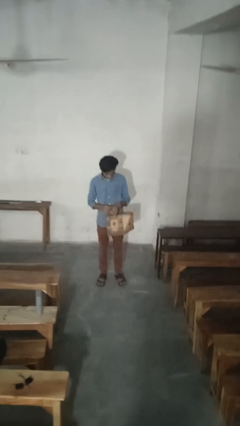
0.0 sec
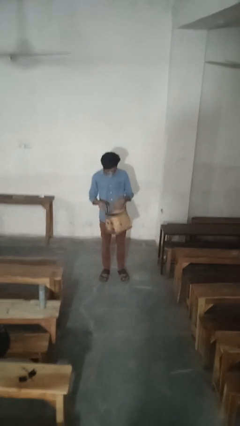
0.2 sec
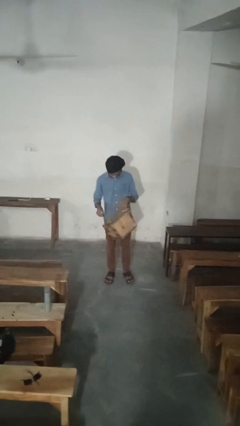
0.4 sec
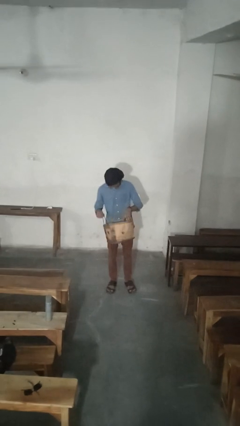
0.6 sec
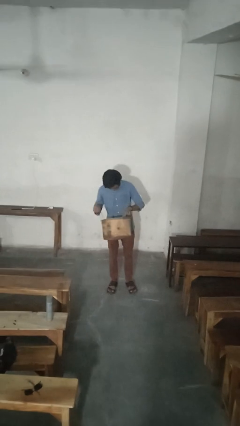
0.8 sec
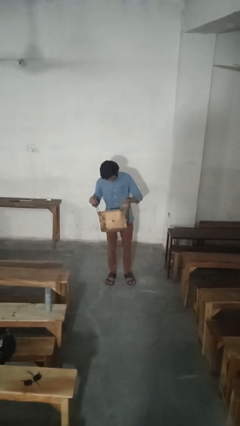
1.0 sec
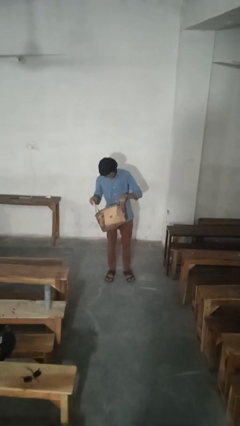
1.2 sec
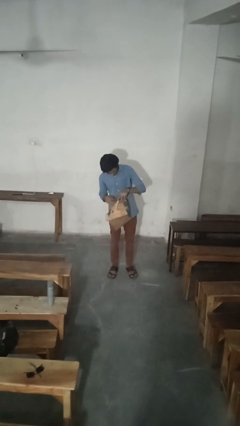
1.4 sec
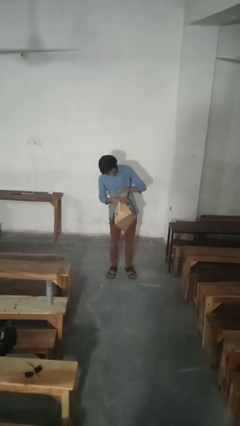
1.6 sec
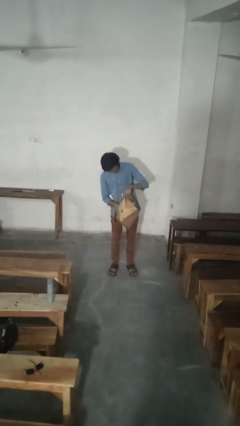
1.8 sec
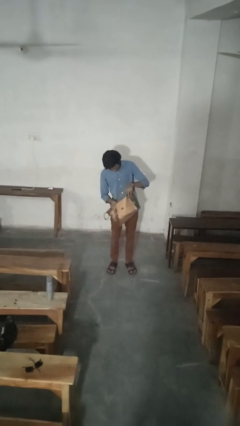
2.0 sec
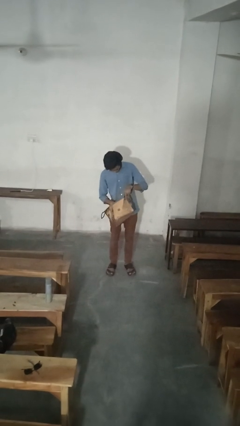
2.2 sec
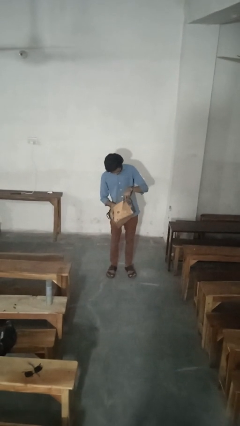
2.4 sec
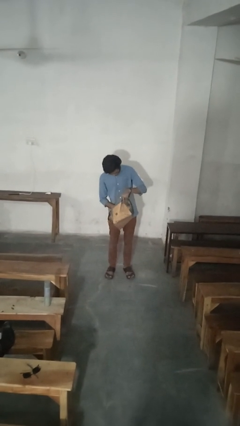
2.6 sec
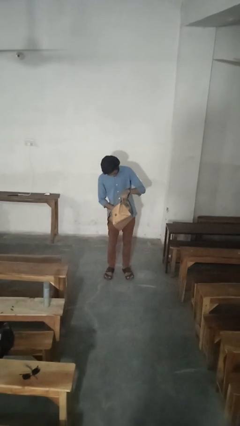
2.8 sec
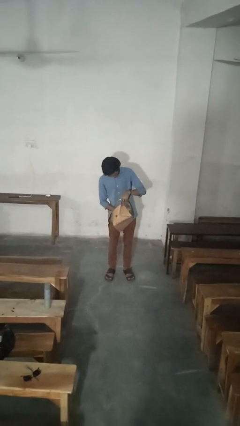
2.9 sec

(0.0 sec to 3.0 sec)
person searches in purse

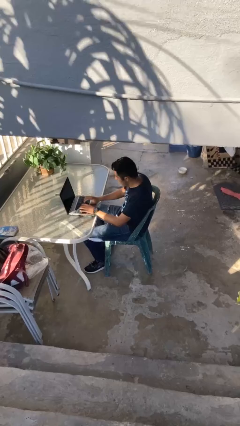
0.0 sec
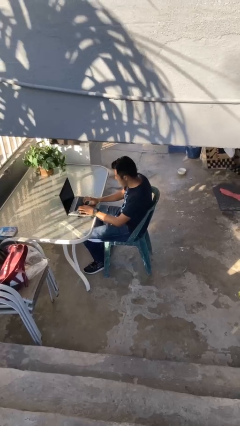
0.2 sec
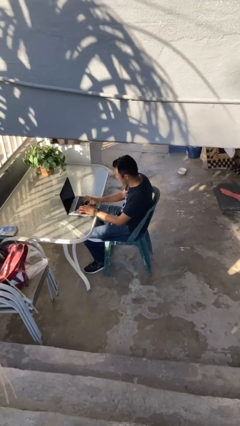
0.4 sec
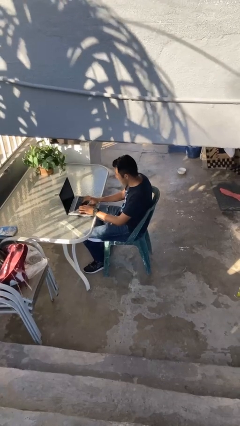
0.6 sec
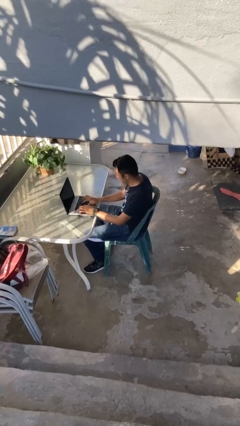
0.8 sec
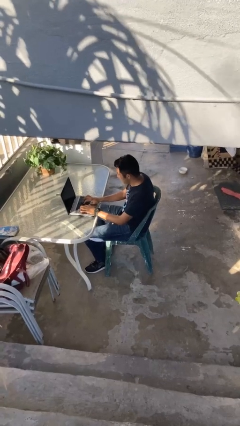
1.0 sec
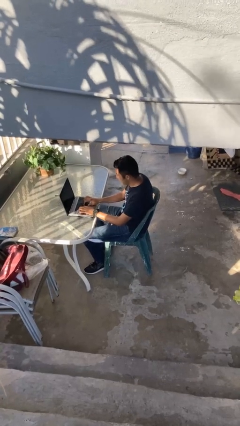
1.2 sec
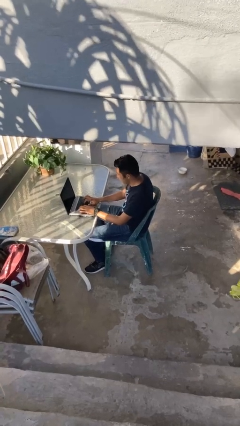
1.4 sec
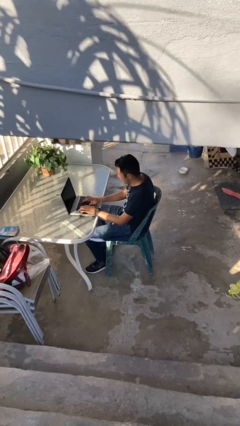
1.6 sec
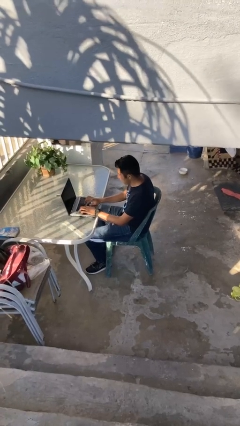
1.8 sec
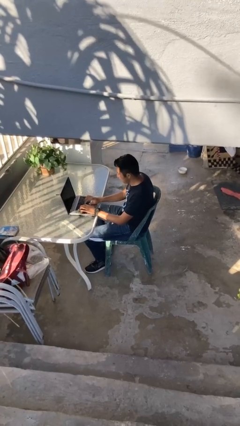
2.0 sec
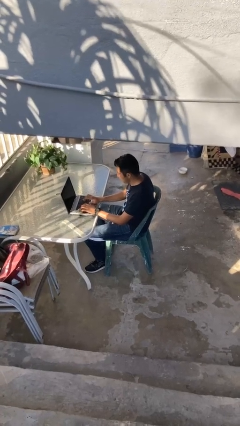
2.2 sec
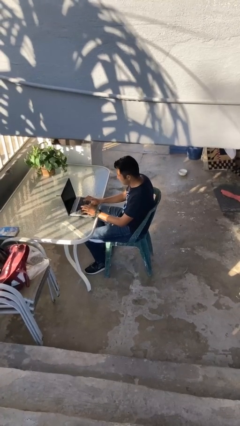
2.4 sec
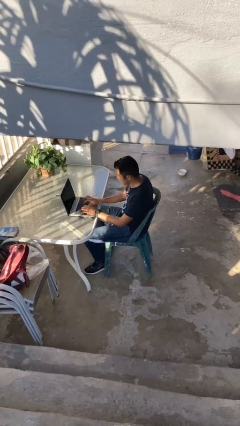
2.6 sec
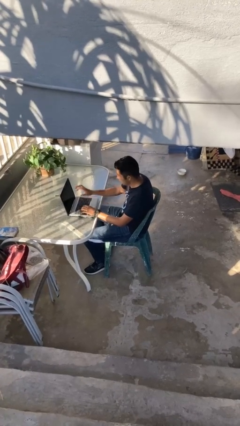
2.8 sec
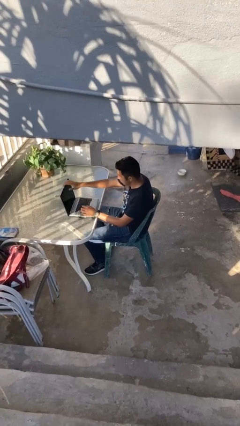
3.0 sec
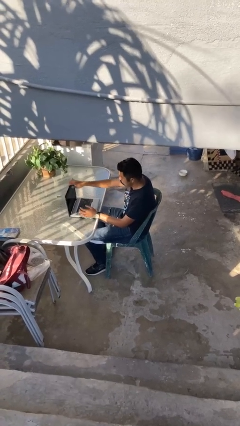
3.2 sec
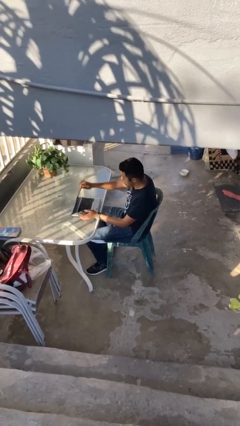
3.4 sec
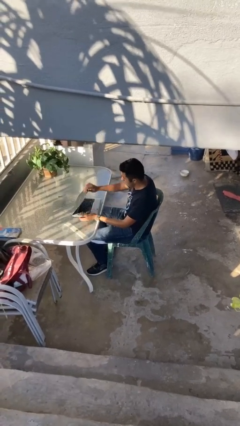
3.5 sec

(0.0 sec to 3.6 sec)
person interacts with laptop

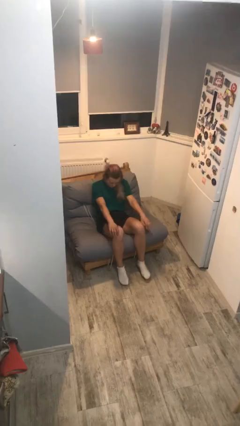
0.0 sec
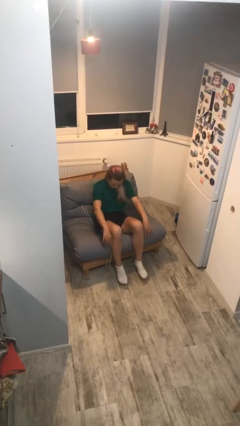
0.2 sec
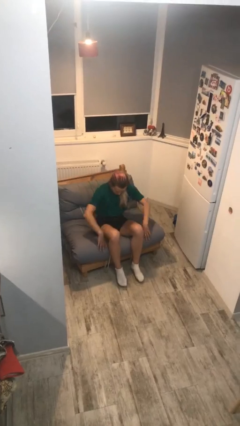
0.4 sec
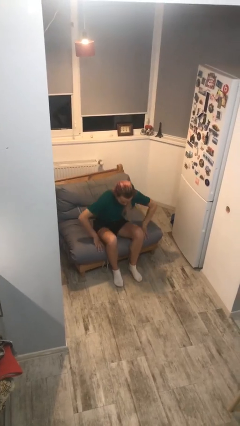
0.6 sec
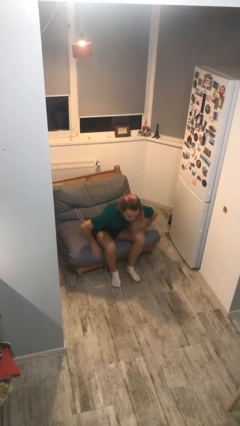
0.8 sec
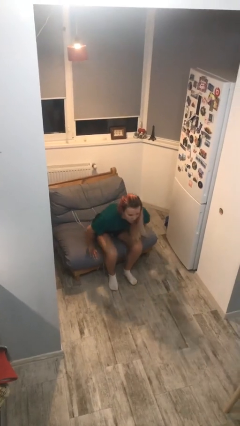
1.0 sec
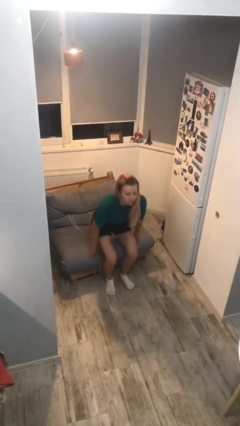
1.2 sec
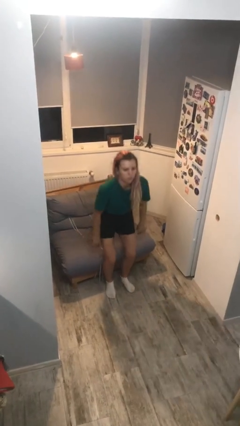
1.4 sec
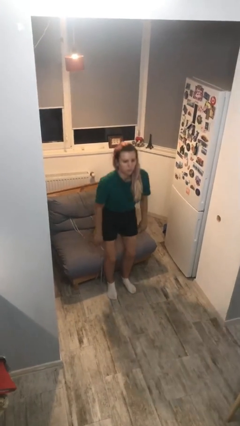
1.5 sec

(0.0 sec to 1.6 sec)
person stands up

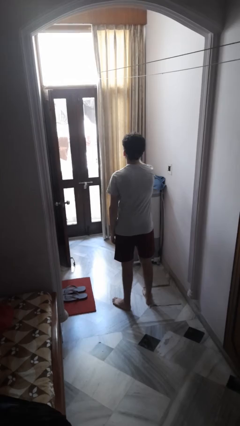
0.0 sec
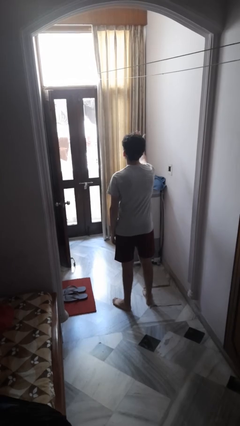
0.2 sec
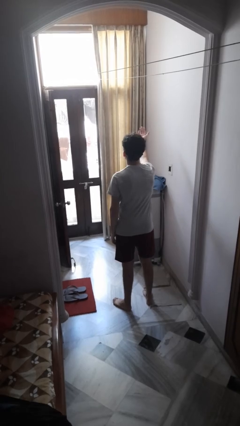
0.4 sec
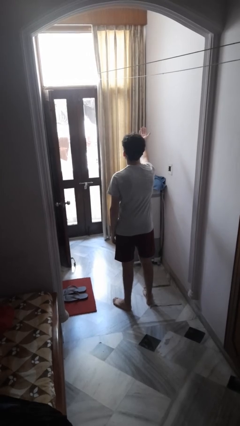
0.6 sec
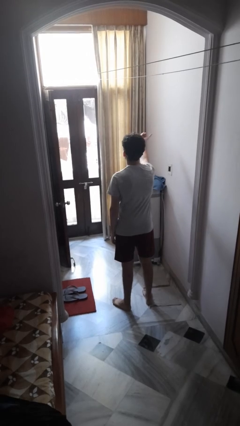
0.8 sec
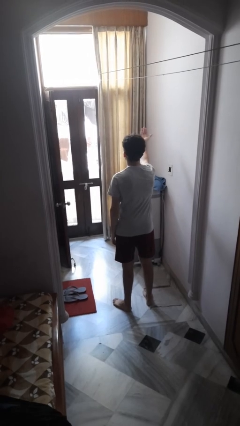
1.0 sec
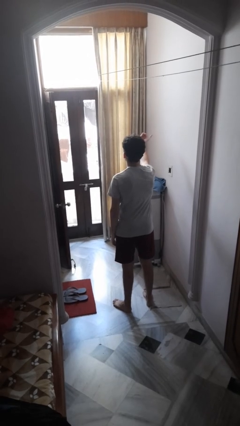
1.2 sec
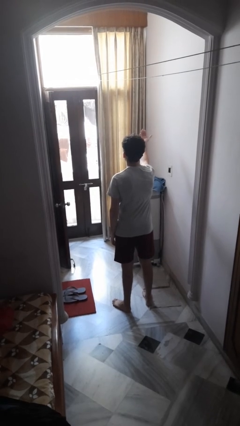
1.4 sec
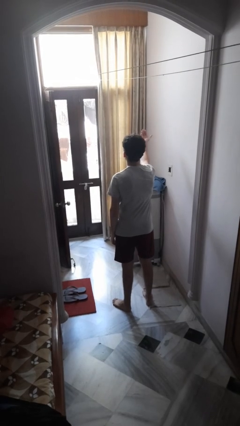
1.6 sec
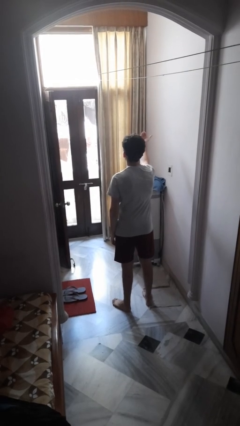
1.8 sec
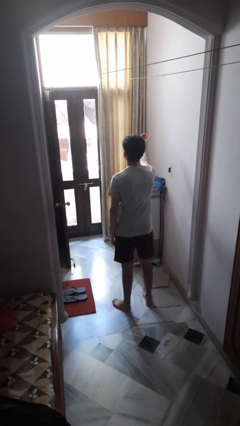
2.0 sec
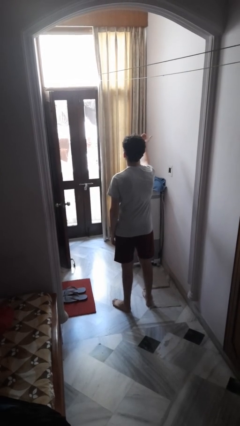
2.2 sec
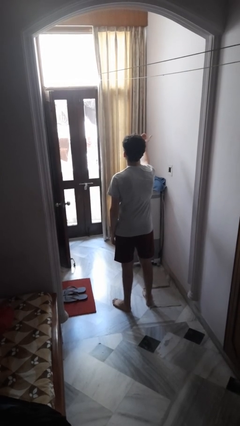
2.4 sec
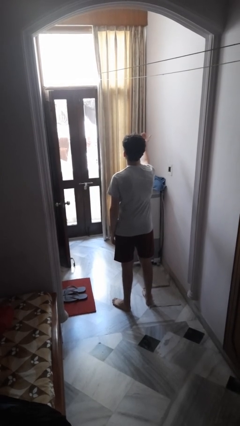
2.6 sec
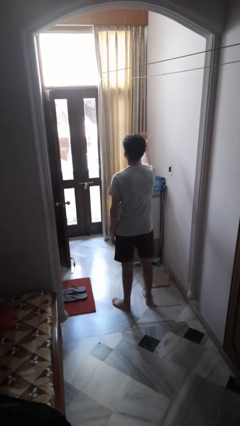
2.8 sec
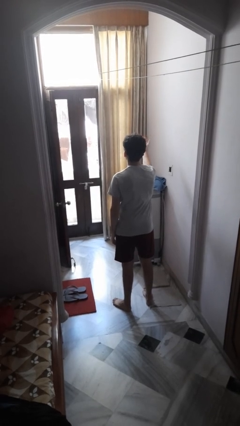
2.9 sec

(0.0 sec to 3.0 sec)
person gestures come here

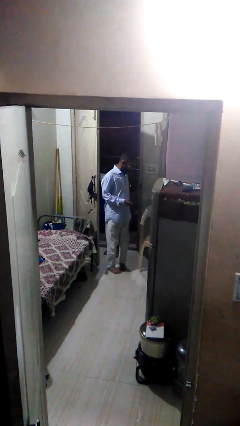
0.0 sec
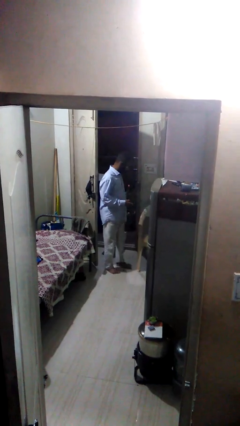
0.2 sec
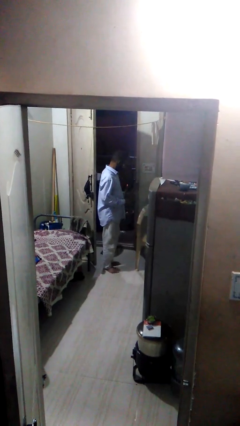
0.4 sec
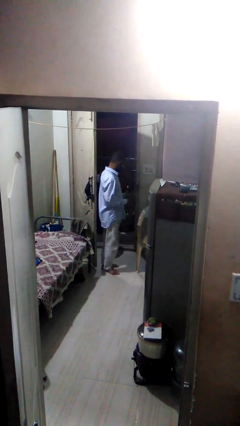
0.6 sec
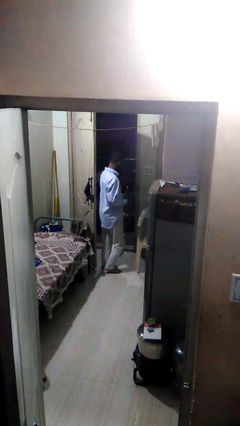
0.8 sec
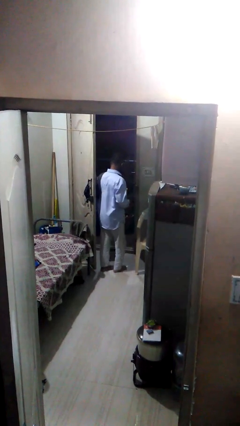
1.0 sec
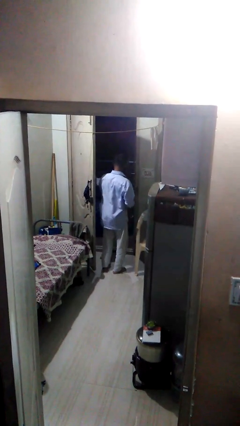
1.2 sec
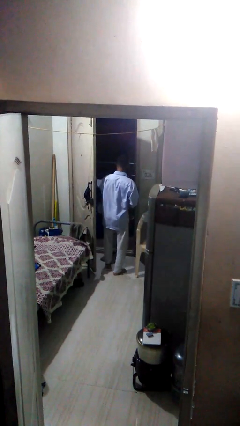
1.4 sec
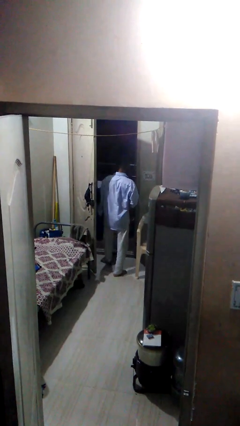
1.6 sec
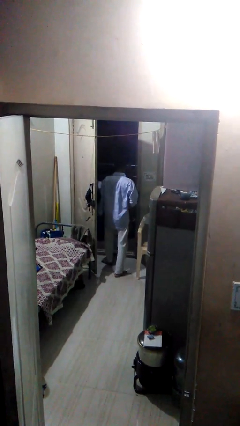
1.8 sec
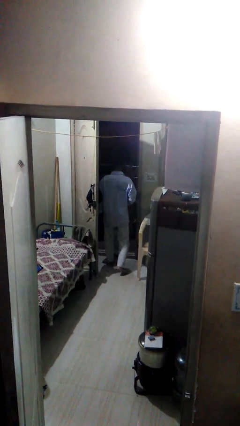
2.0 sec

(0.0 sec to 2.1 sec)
person exits scene through structure

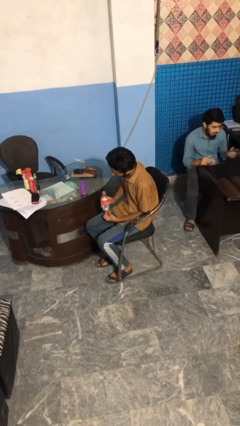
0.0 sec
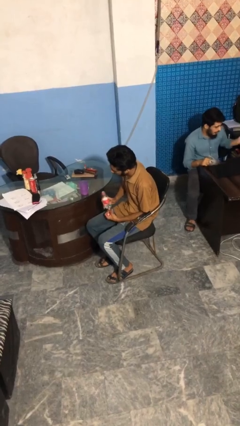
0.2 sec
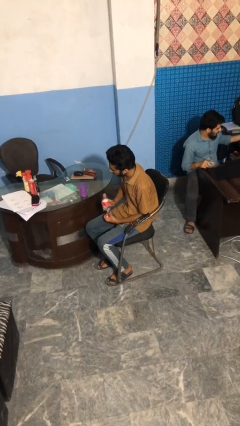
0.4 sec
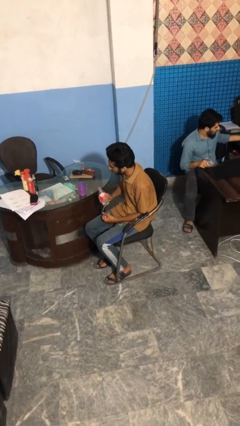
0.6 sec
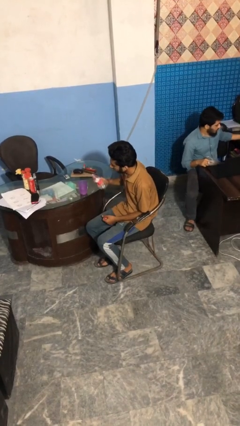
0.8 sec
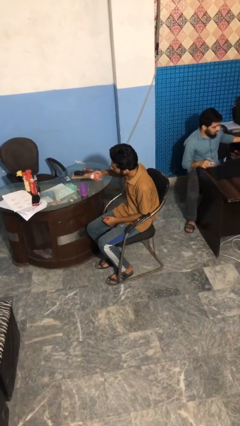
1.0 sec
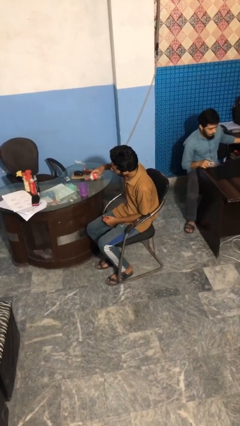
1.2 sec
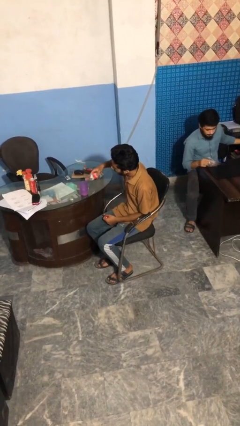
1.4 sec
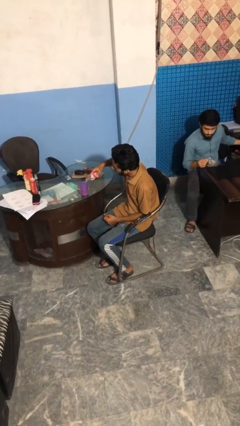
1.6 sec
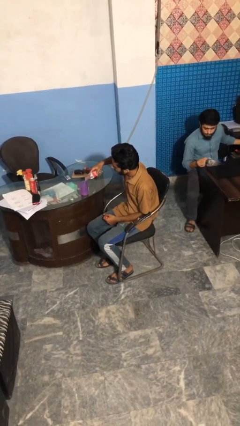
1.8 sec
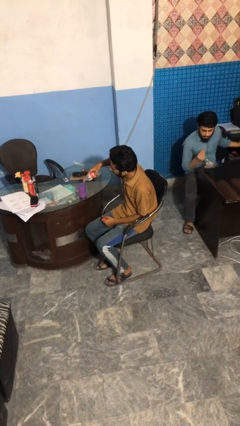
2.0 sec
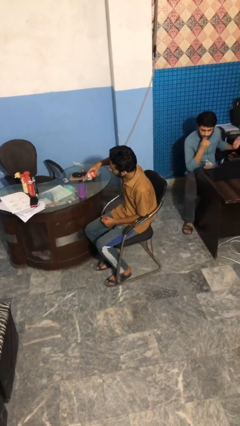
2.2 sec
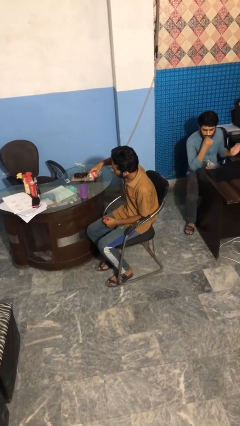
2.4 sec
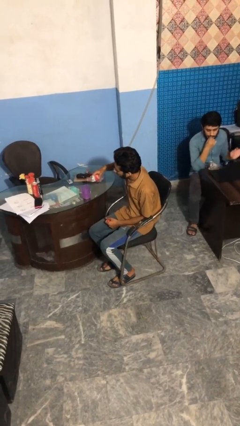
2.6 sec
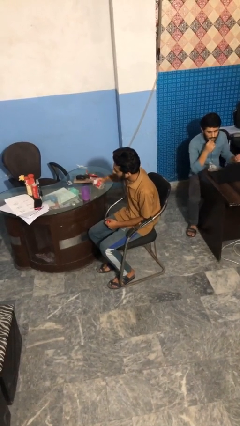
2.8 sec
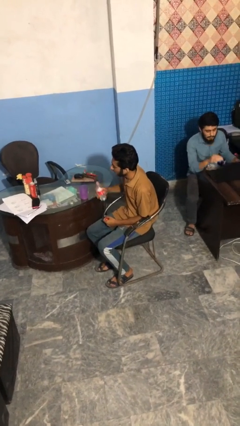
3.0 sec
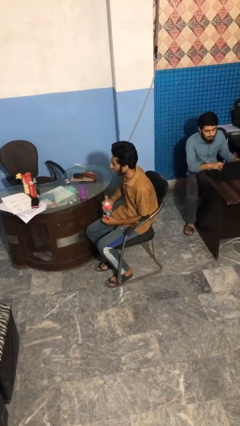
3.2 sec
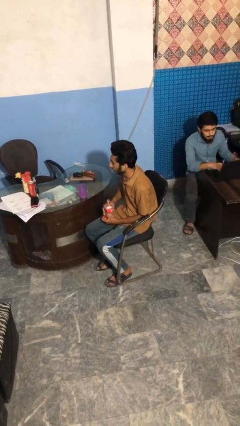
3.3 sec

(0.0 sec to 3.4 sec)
person pours liquid into cup

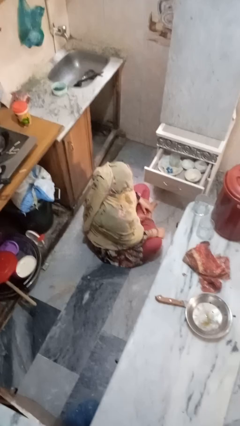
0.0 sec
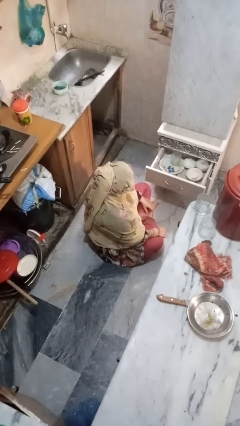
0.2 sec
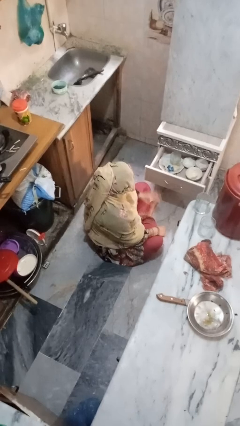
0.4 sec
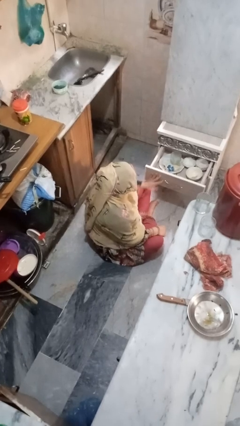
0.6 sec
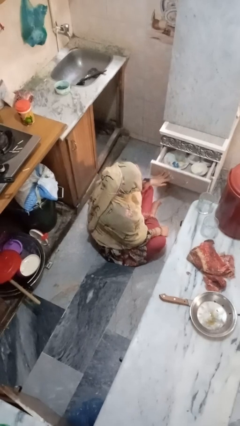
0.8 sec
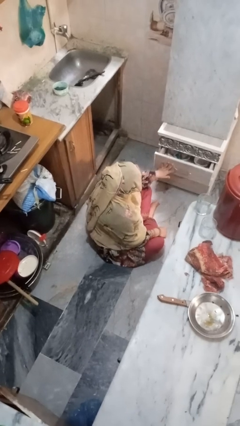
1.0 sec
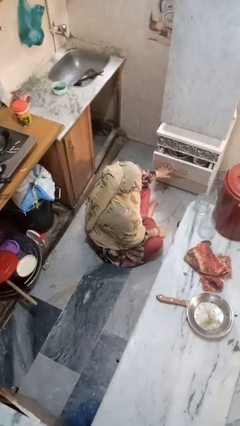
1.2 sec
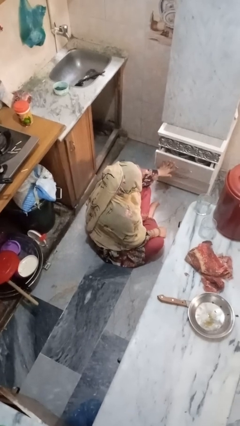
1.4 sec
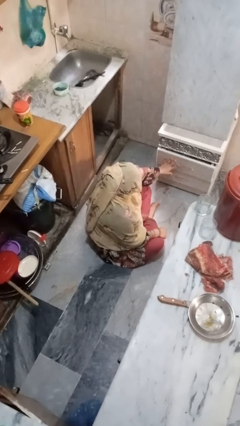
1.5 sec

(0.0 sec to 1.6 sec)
person closes kitchen drawer
